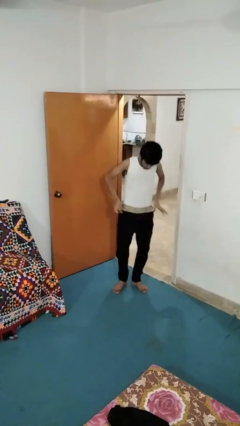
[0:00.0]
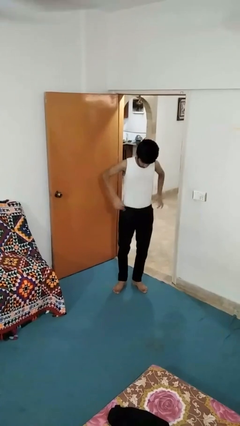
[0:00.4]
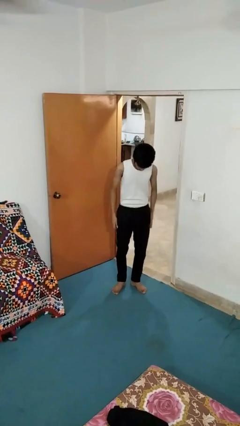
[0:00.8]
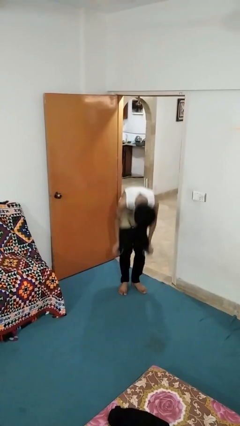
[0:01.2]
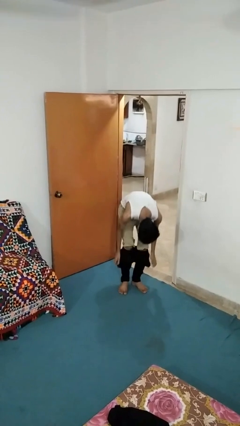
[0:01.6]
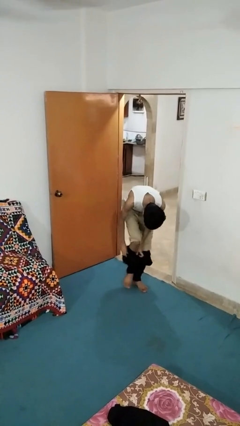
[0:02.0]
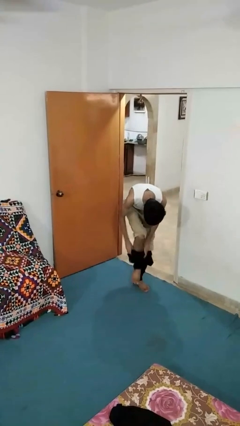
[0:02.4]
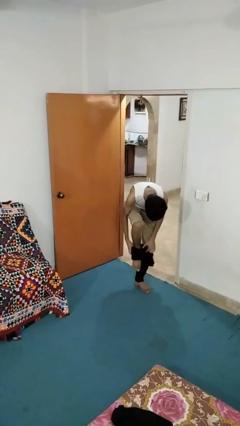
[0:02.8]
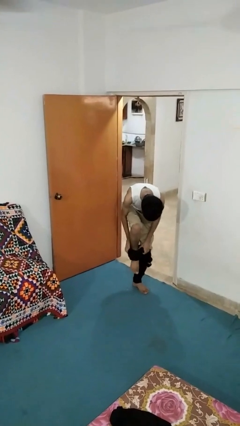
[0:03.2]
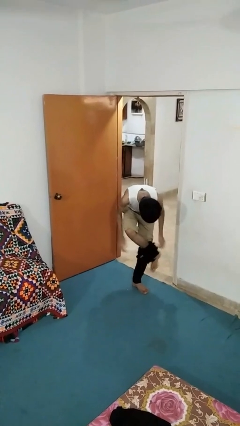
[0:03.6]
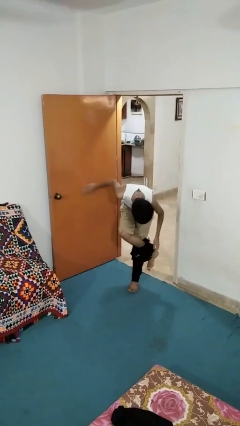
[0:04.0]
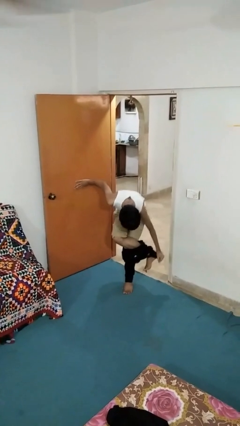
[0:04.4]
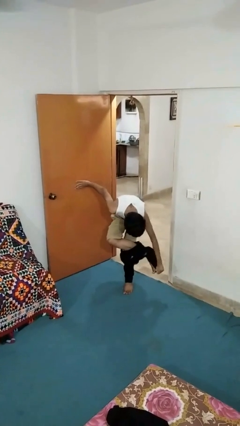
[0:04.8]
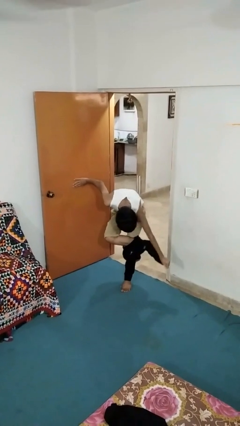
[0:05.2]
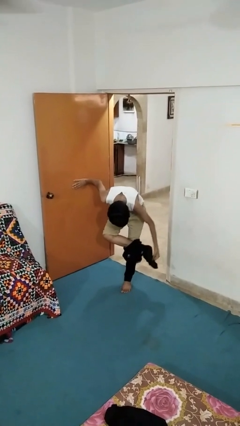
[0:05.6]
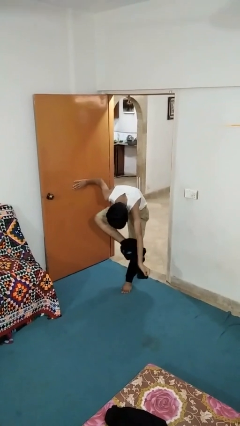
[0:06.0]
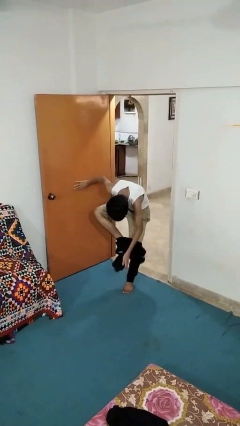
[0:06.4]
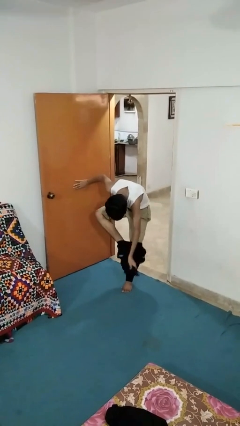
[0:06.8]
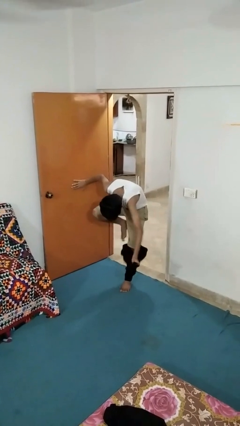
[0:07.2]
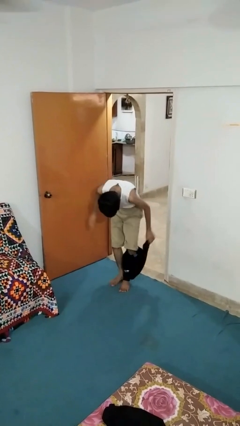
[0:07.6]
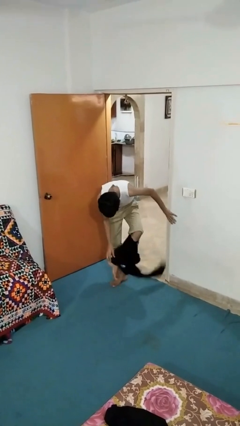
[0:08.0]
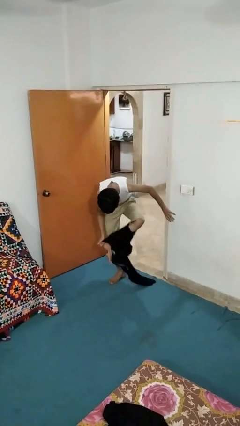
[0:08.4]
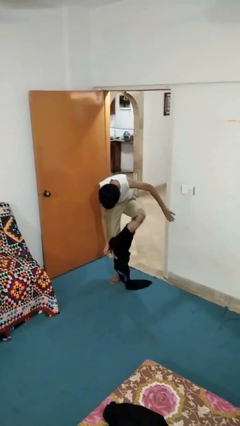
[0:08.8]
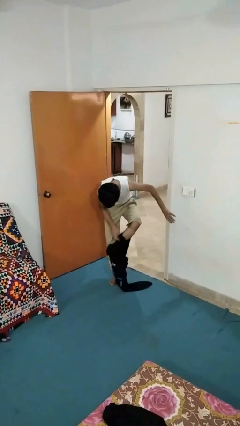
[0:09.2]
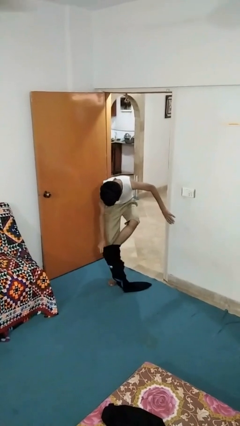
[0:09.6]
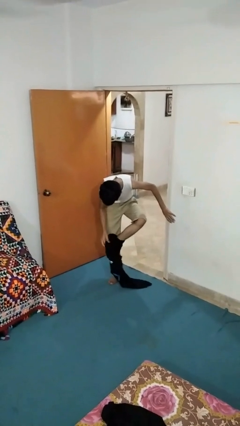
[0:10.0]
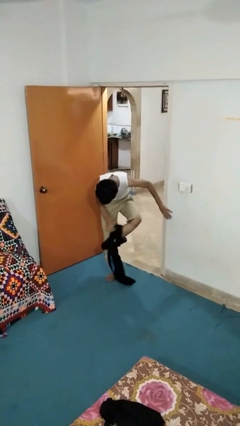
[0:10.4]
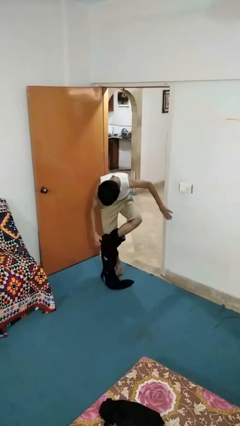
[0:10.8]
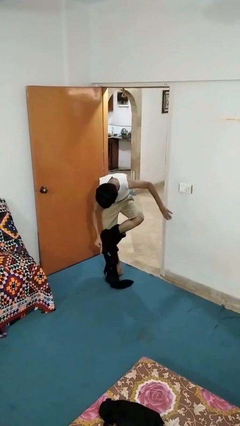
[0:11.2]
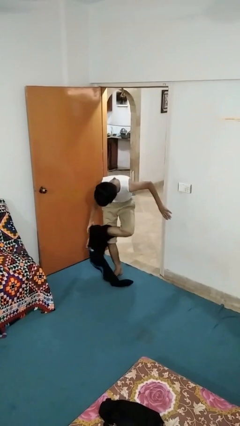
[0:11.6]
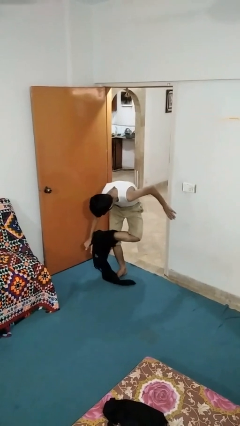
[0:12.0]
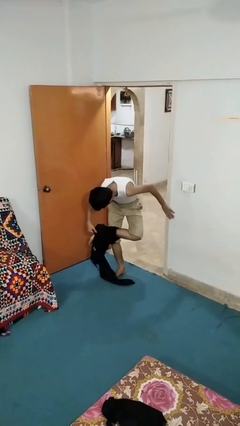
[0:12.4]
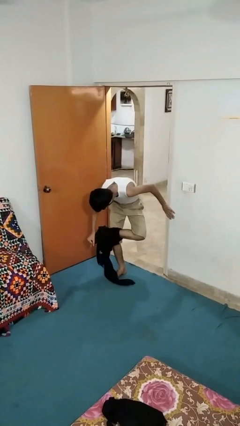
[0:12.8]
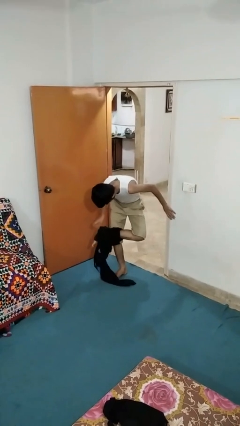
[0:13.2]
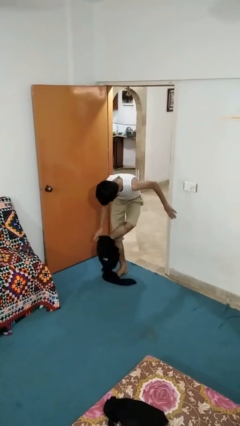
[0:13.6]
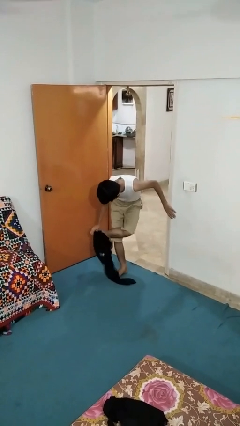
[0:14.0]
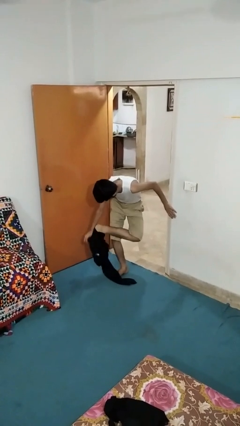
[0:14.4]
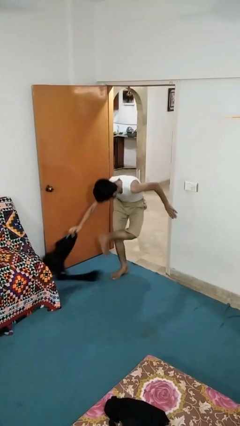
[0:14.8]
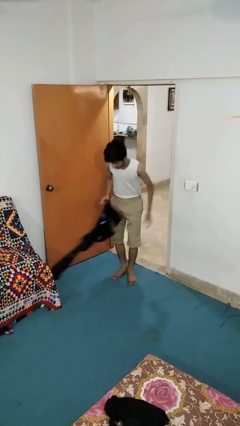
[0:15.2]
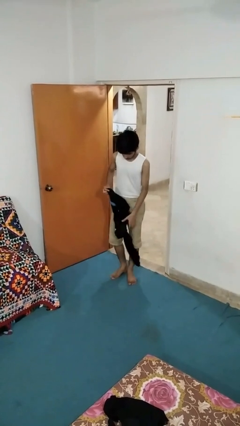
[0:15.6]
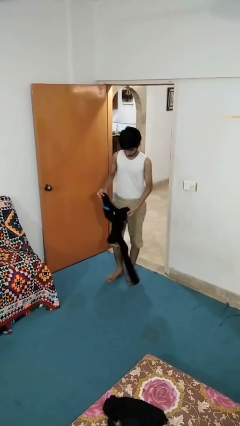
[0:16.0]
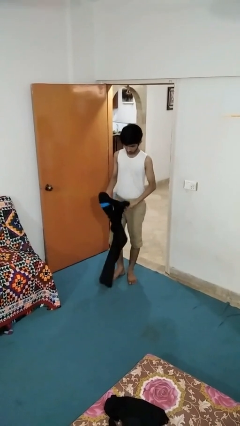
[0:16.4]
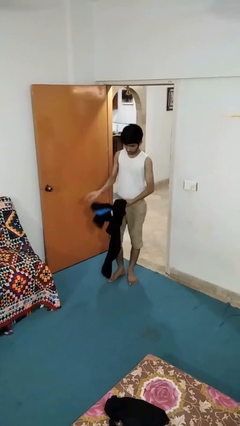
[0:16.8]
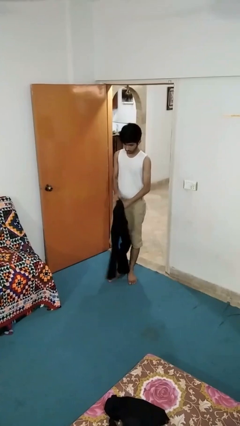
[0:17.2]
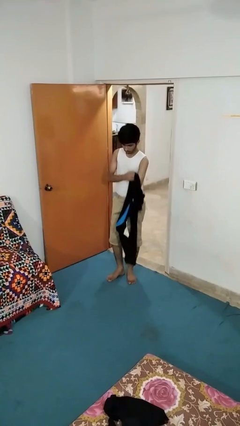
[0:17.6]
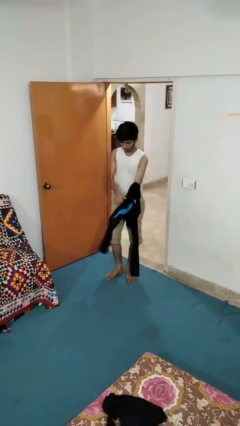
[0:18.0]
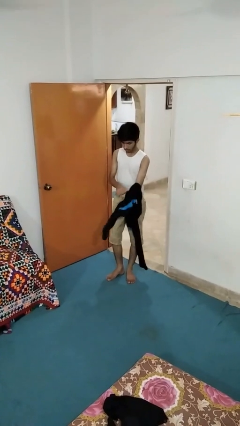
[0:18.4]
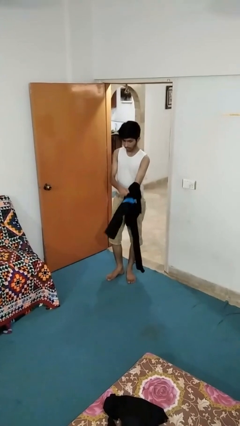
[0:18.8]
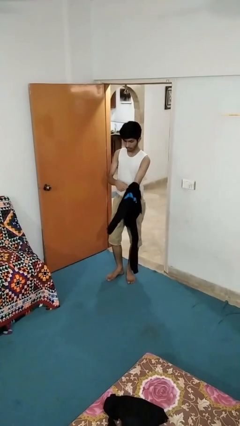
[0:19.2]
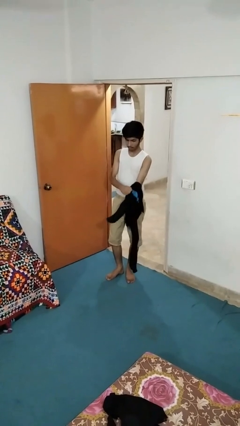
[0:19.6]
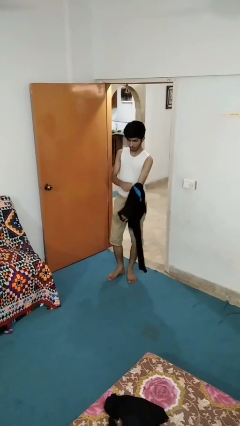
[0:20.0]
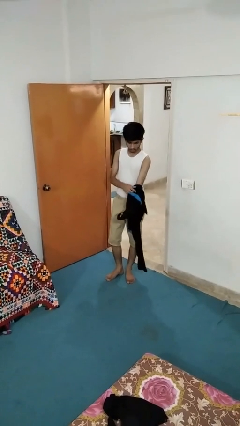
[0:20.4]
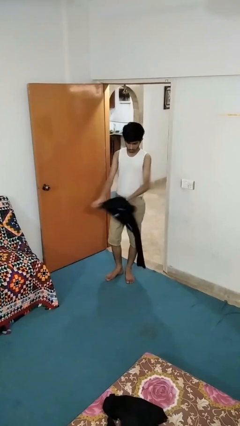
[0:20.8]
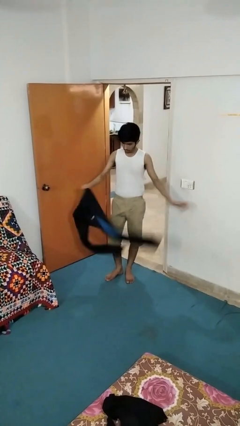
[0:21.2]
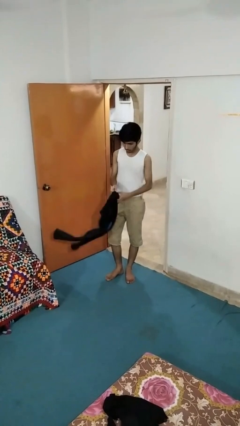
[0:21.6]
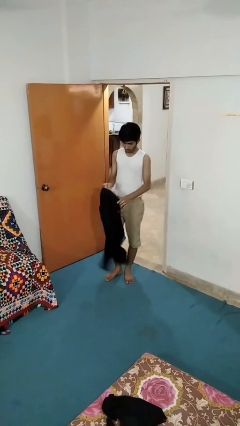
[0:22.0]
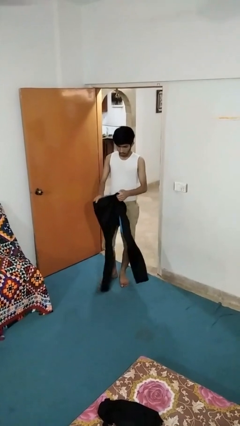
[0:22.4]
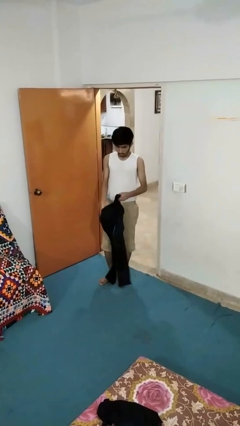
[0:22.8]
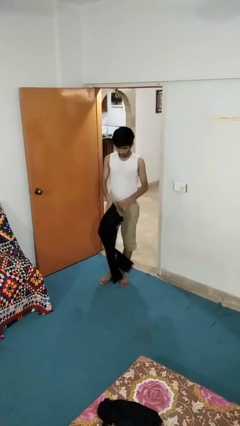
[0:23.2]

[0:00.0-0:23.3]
person takes off pants

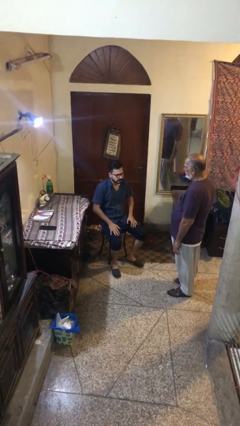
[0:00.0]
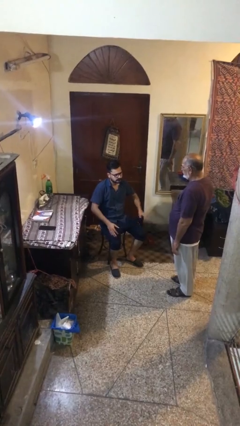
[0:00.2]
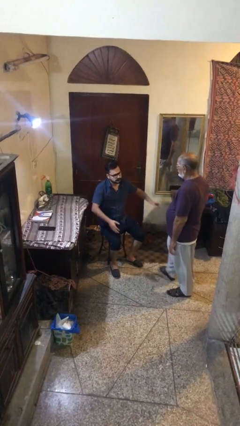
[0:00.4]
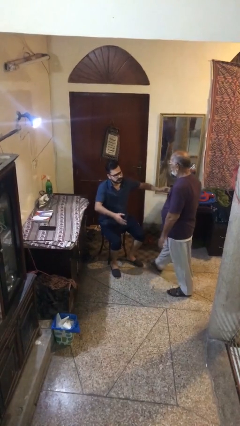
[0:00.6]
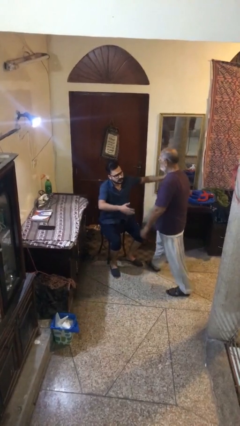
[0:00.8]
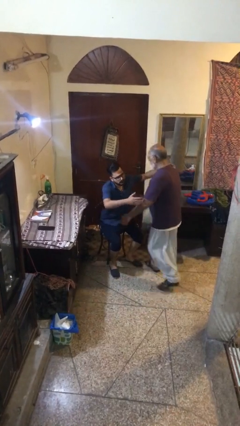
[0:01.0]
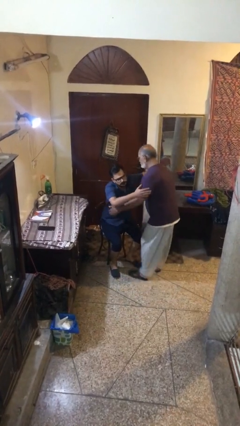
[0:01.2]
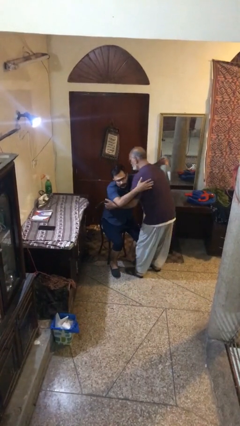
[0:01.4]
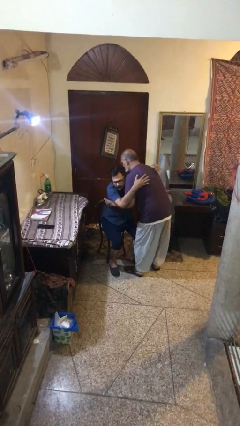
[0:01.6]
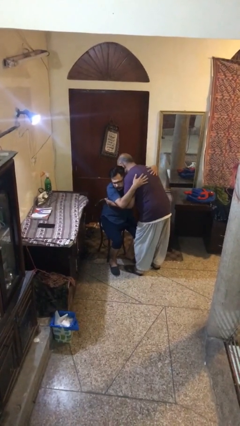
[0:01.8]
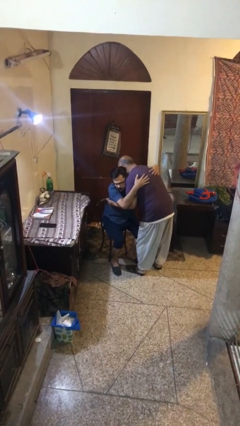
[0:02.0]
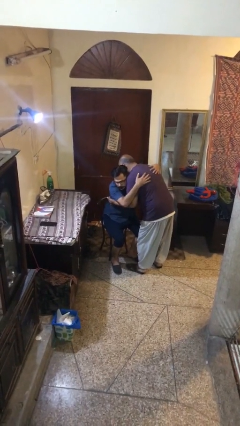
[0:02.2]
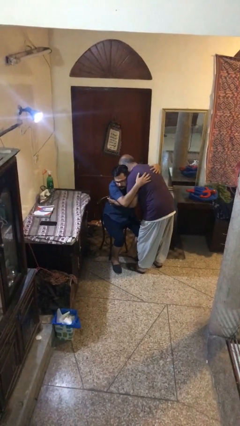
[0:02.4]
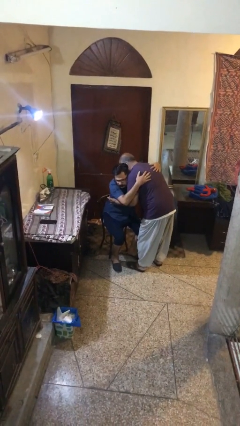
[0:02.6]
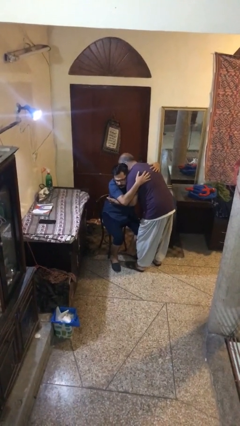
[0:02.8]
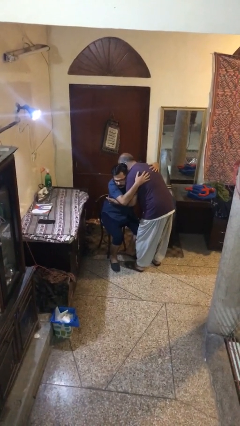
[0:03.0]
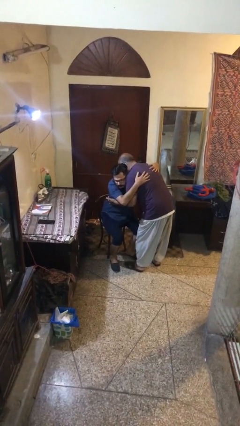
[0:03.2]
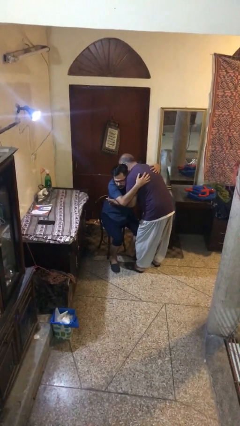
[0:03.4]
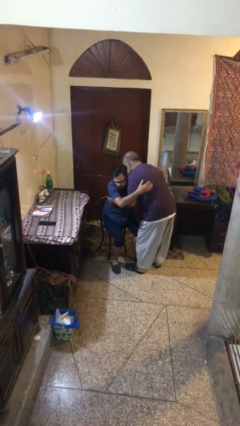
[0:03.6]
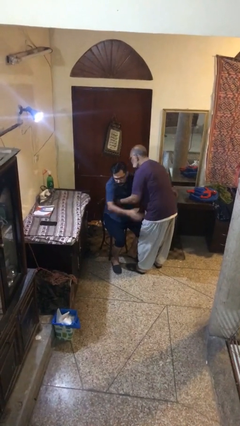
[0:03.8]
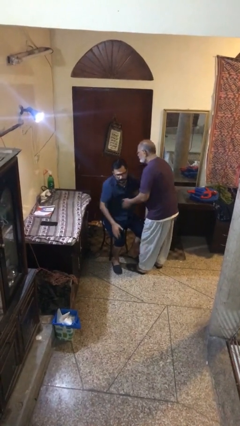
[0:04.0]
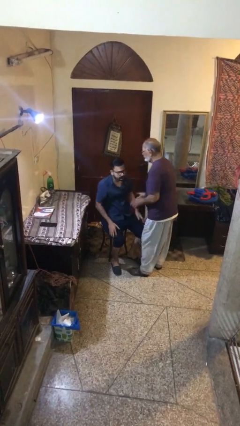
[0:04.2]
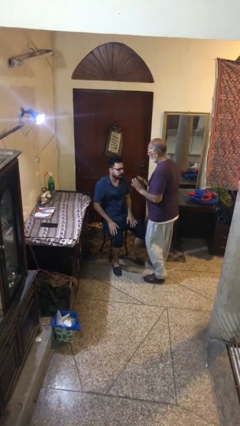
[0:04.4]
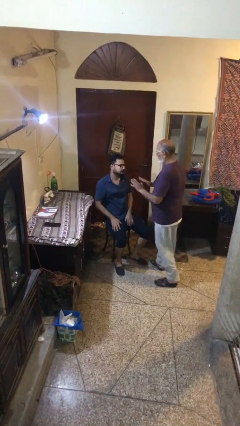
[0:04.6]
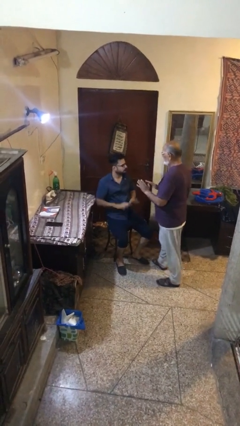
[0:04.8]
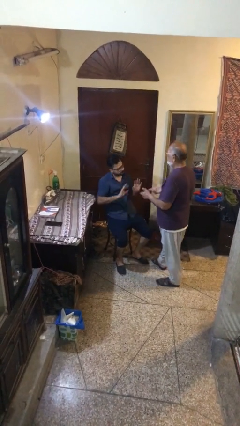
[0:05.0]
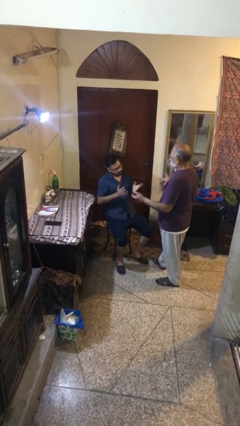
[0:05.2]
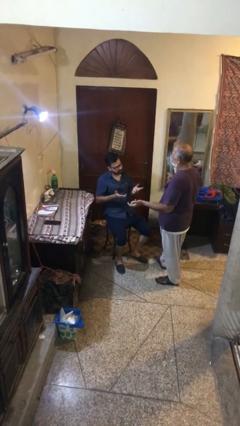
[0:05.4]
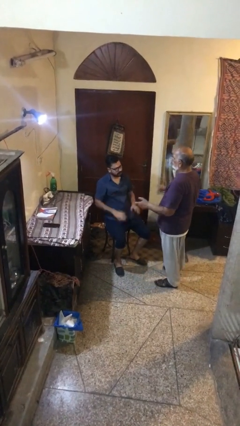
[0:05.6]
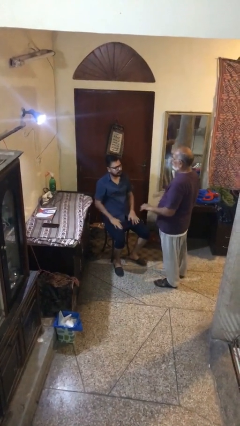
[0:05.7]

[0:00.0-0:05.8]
person embraces person

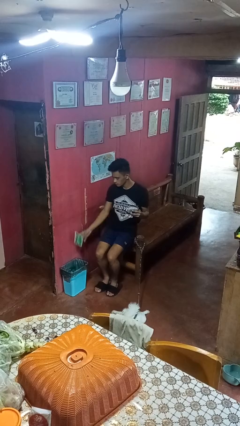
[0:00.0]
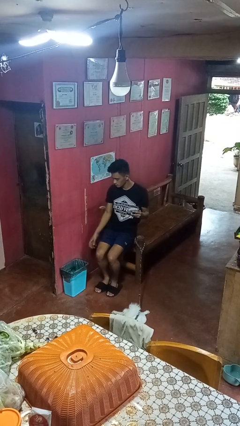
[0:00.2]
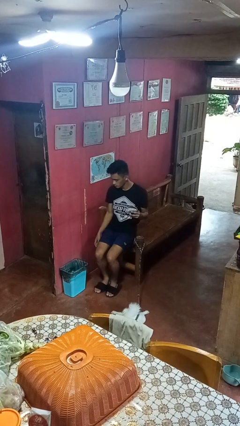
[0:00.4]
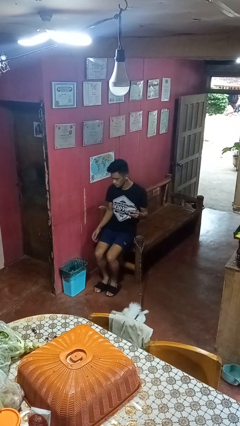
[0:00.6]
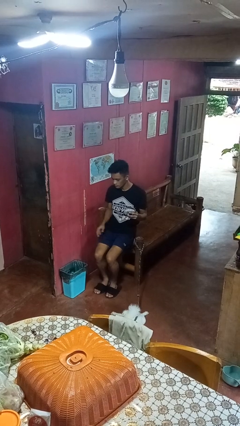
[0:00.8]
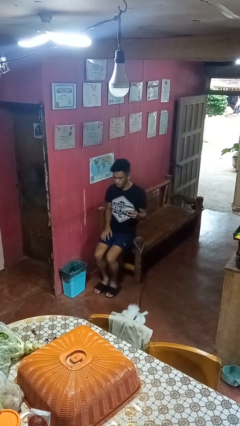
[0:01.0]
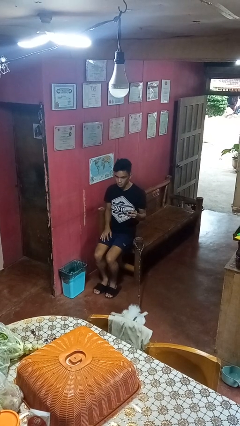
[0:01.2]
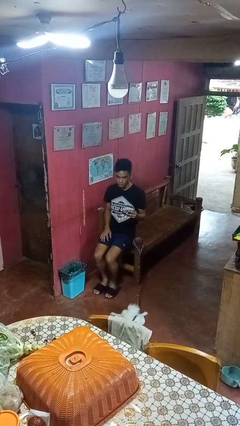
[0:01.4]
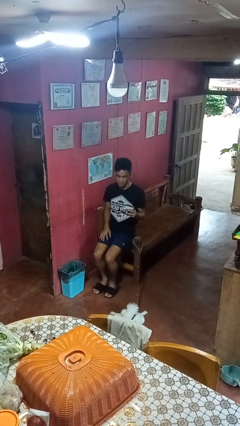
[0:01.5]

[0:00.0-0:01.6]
person discards trash
